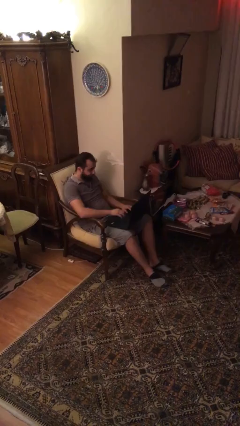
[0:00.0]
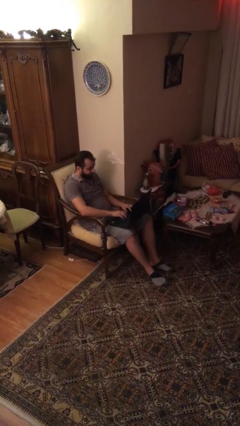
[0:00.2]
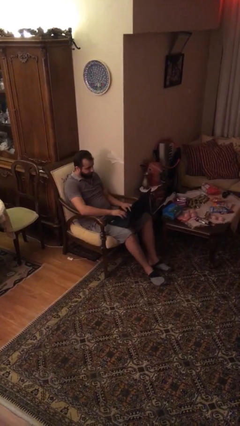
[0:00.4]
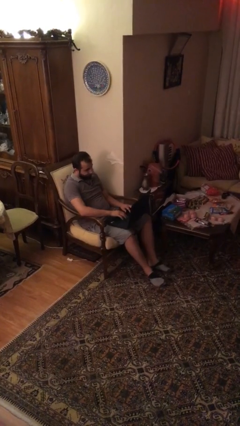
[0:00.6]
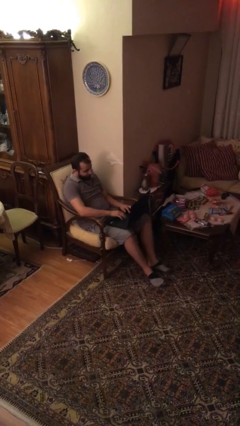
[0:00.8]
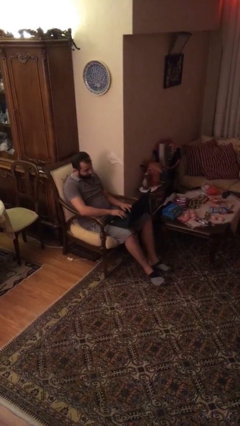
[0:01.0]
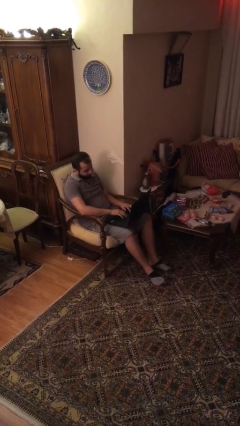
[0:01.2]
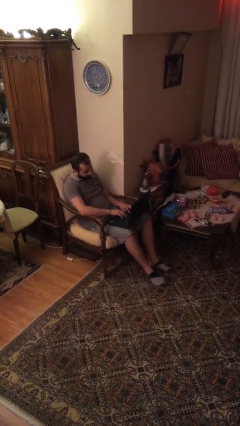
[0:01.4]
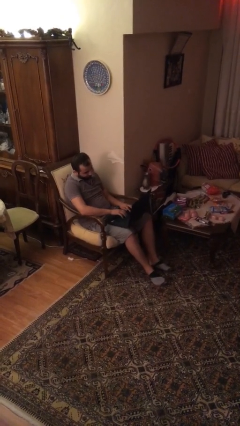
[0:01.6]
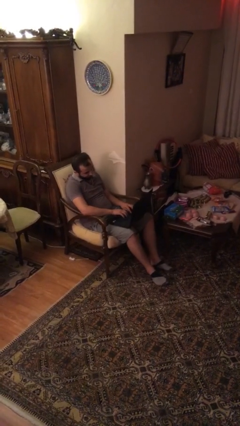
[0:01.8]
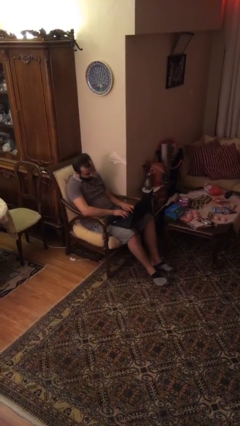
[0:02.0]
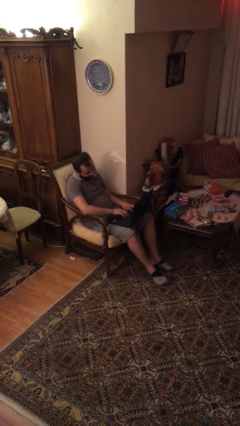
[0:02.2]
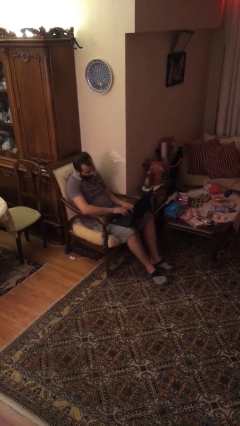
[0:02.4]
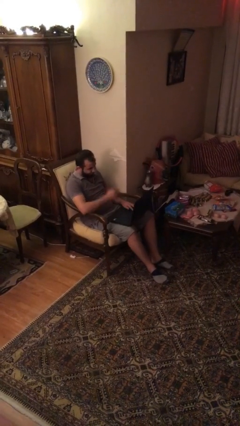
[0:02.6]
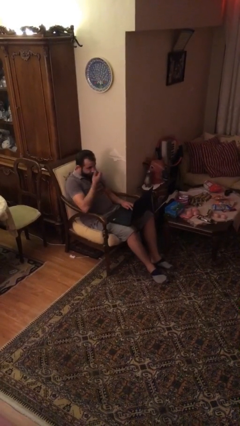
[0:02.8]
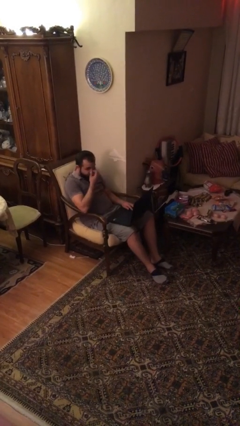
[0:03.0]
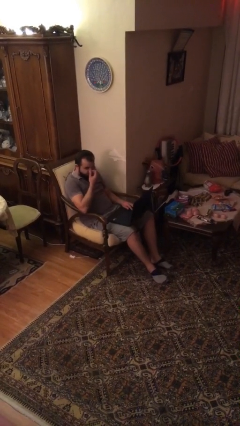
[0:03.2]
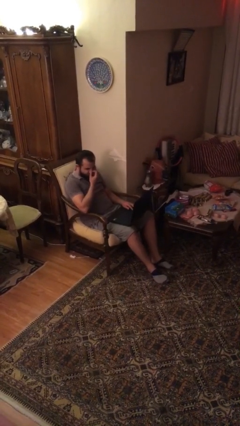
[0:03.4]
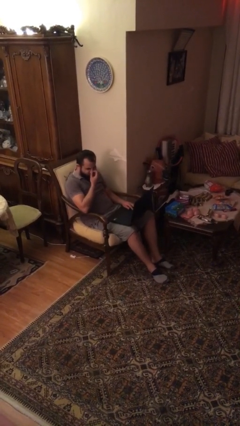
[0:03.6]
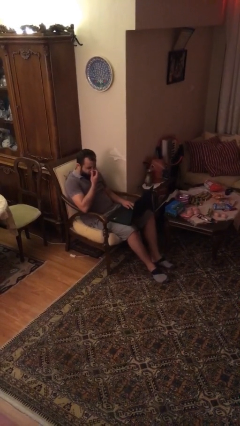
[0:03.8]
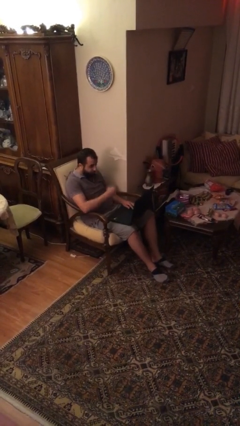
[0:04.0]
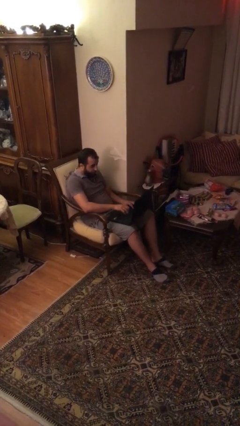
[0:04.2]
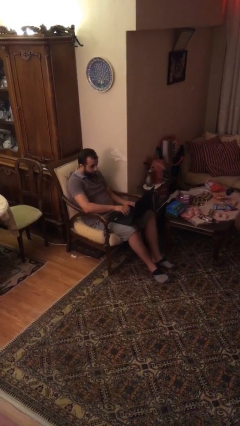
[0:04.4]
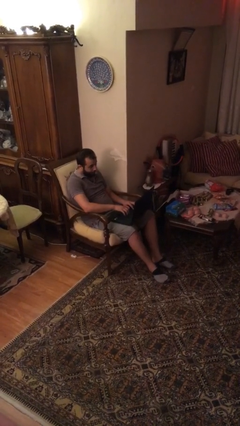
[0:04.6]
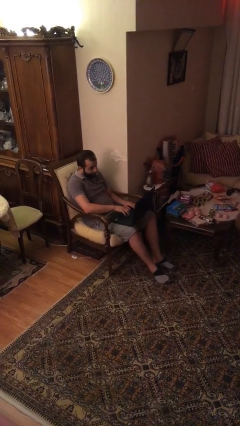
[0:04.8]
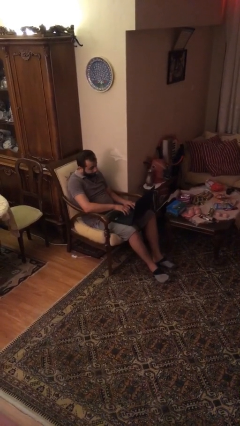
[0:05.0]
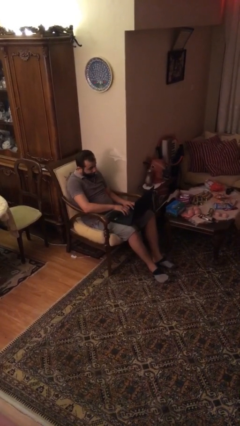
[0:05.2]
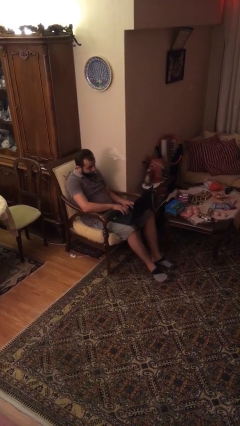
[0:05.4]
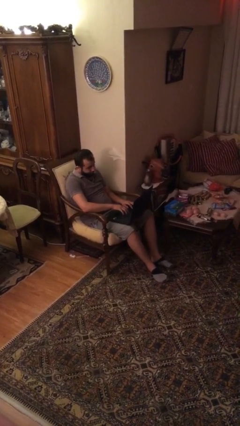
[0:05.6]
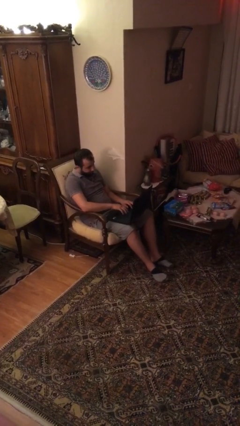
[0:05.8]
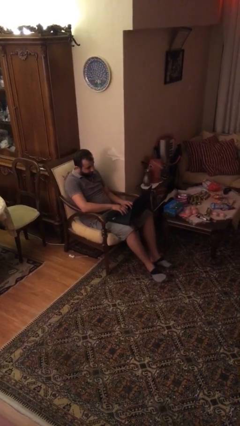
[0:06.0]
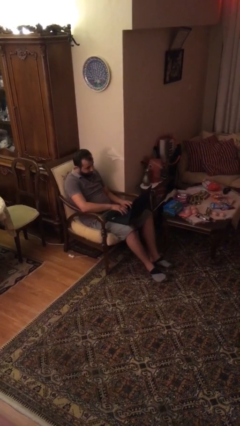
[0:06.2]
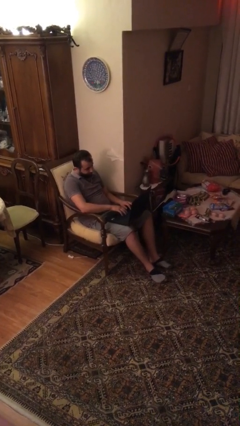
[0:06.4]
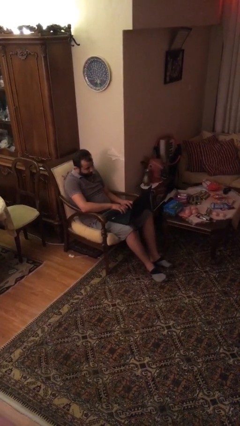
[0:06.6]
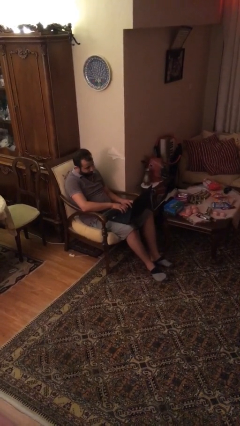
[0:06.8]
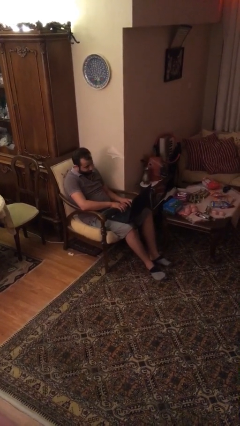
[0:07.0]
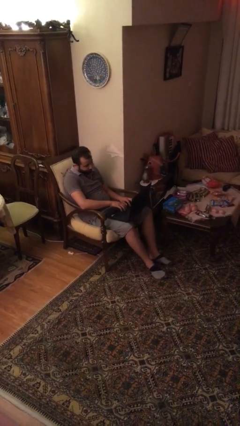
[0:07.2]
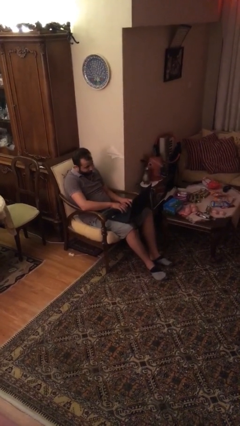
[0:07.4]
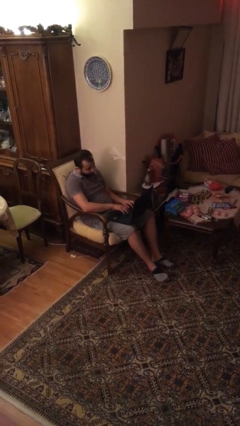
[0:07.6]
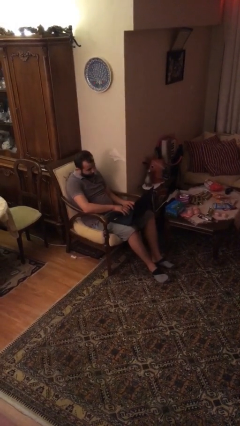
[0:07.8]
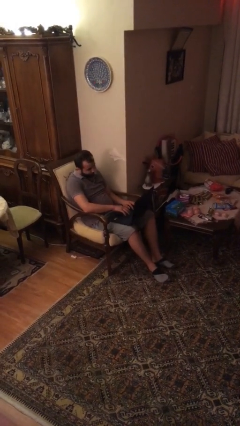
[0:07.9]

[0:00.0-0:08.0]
person interacts with laptop

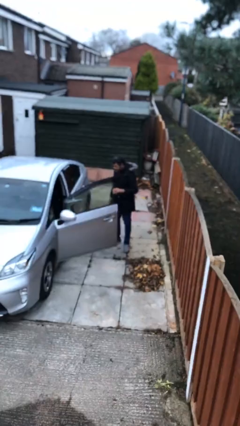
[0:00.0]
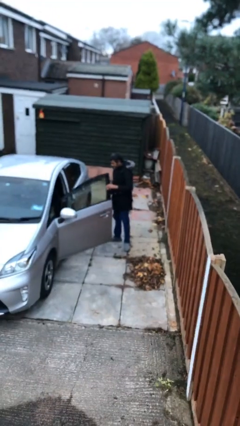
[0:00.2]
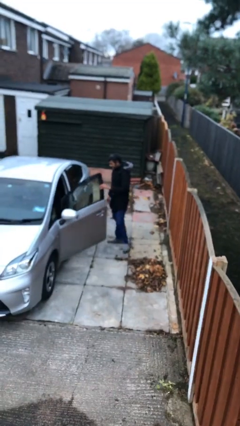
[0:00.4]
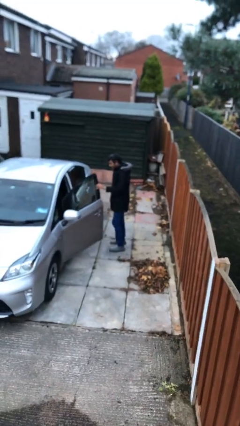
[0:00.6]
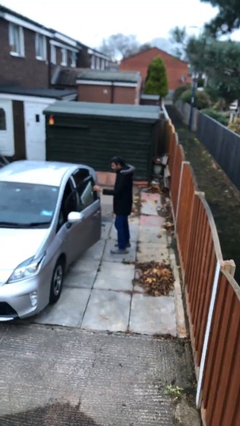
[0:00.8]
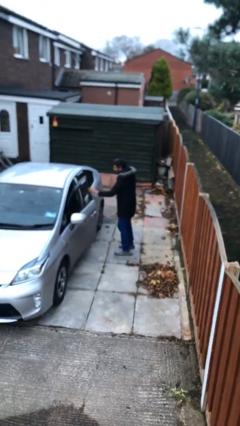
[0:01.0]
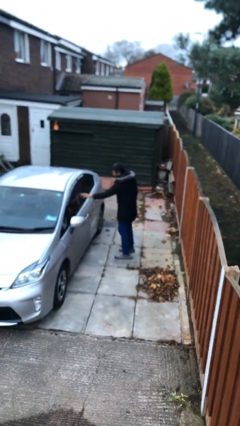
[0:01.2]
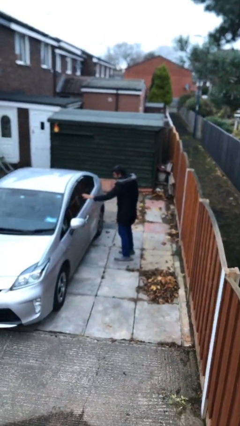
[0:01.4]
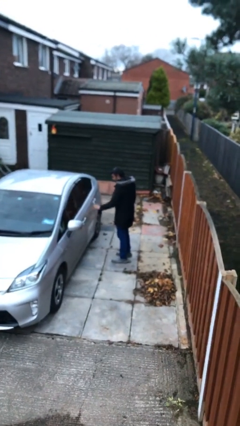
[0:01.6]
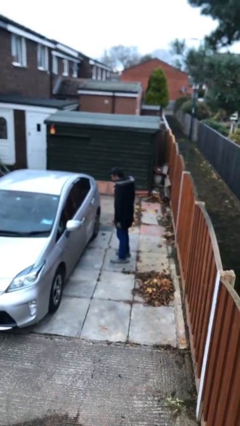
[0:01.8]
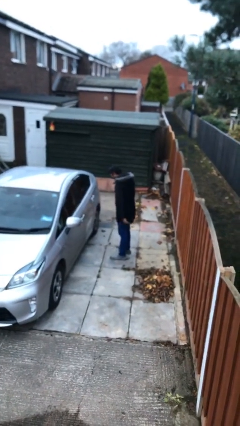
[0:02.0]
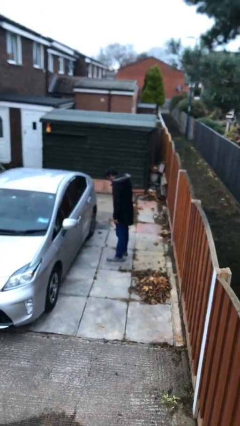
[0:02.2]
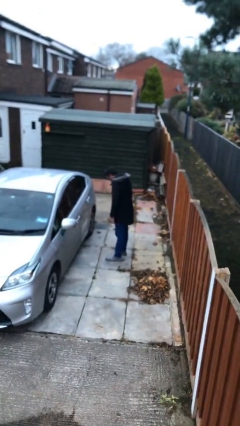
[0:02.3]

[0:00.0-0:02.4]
person closes car door

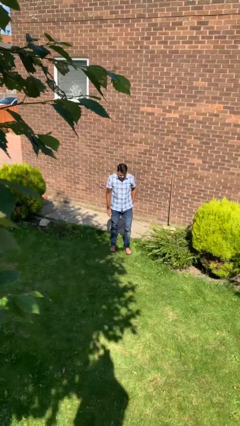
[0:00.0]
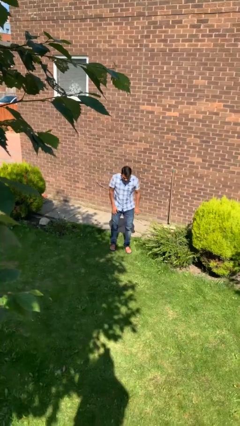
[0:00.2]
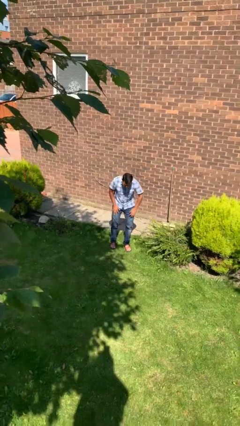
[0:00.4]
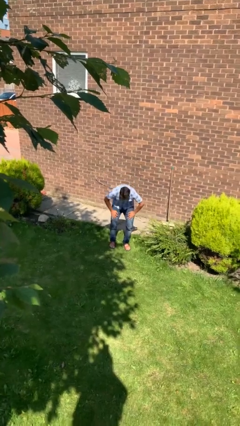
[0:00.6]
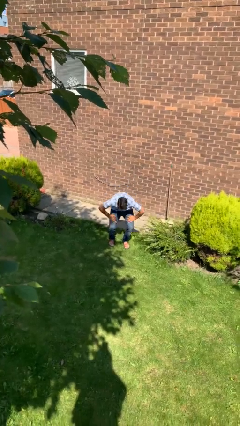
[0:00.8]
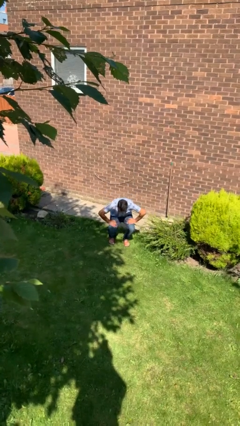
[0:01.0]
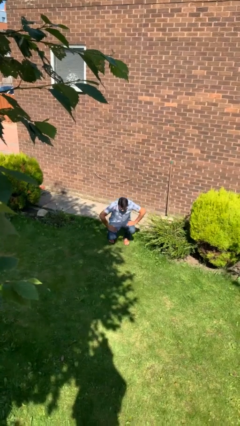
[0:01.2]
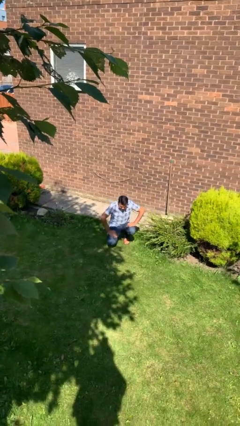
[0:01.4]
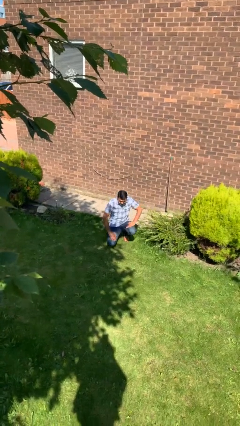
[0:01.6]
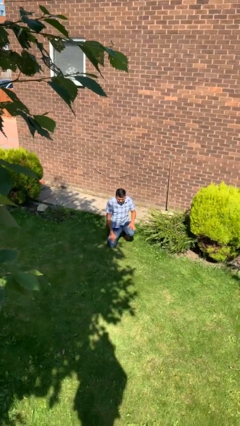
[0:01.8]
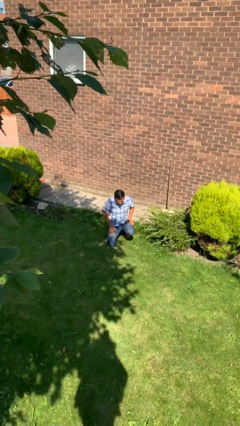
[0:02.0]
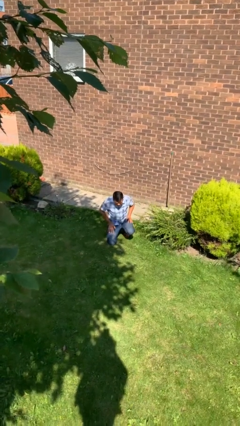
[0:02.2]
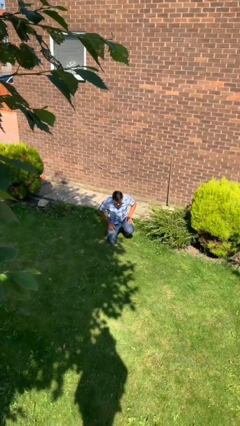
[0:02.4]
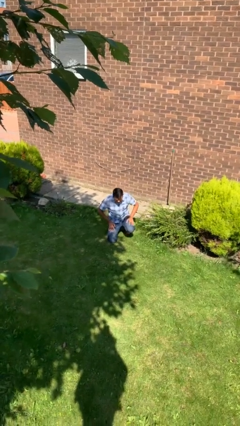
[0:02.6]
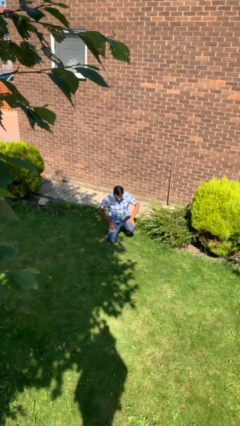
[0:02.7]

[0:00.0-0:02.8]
person kneels

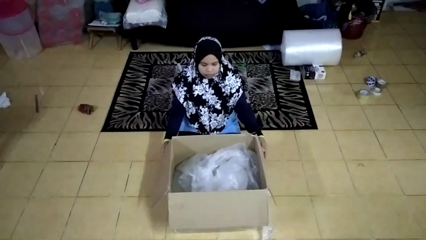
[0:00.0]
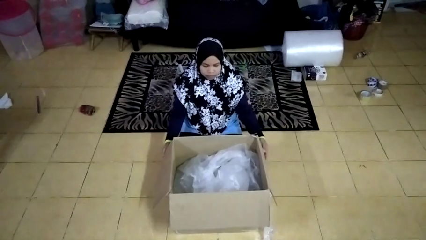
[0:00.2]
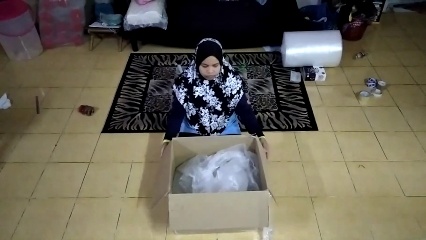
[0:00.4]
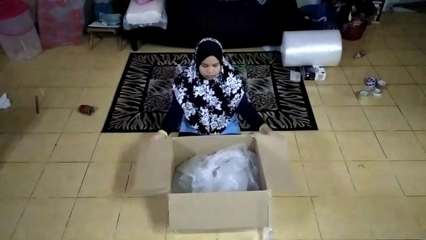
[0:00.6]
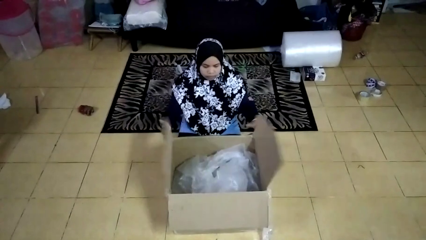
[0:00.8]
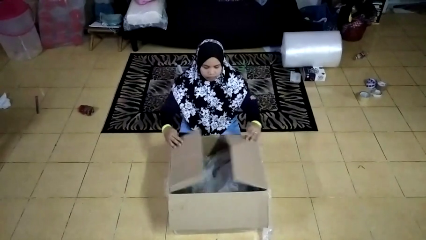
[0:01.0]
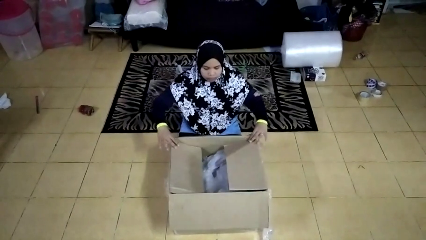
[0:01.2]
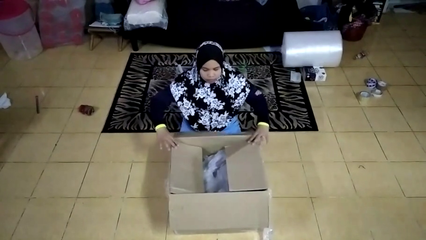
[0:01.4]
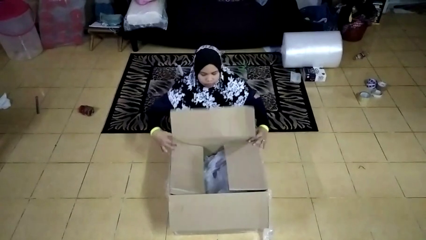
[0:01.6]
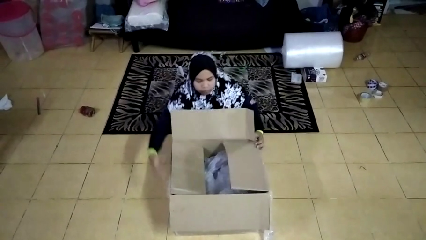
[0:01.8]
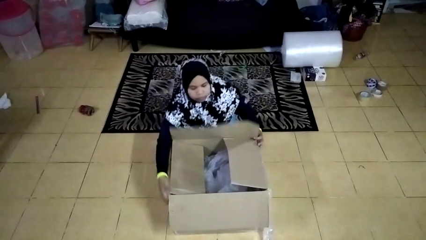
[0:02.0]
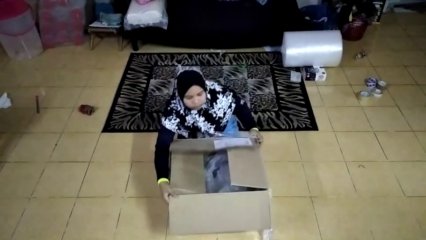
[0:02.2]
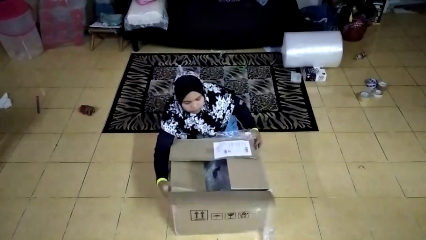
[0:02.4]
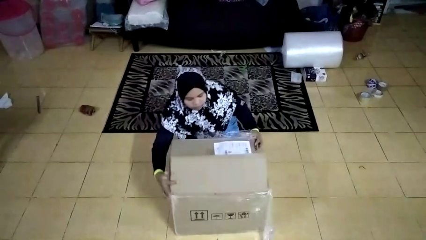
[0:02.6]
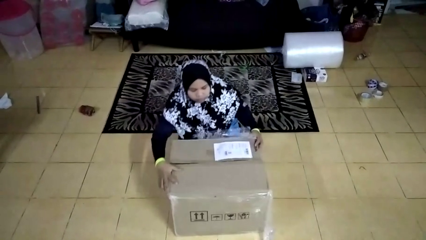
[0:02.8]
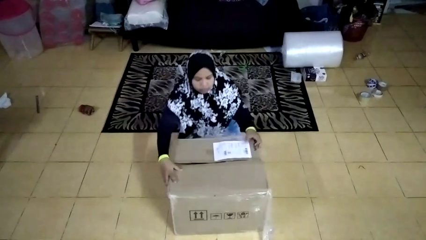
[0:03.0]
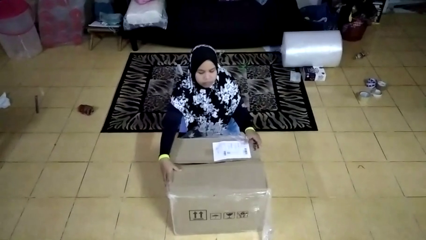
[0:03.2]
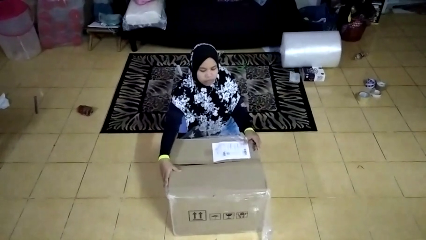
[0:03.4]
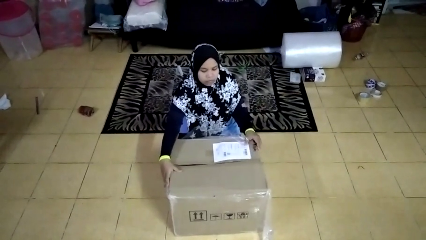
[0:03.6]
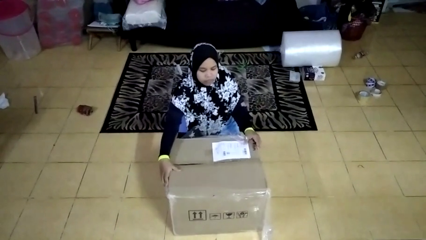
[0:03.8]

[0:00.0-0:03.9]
person closes box

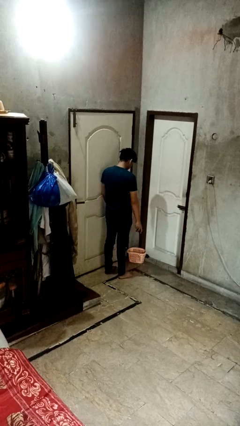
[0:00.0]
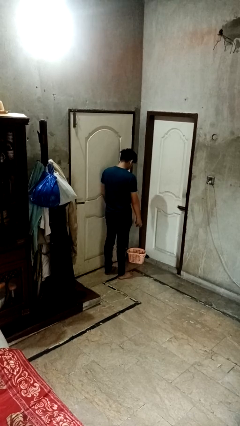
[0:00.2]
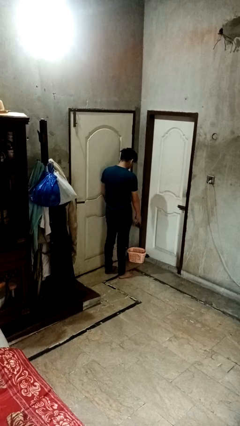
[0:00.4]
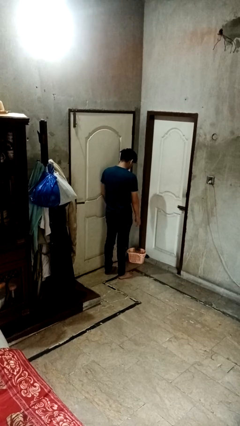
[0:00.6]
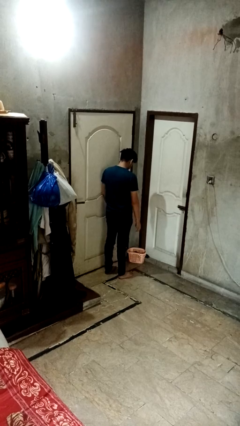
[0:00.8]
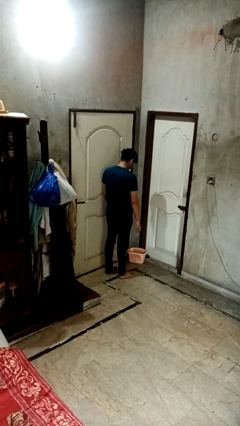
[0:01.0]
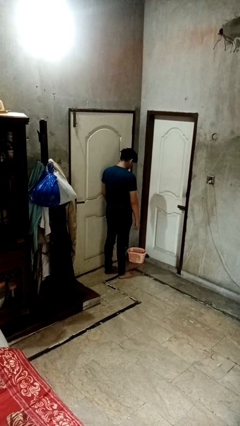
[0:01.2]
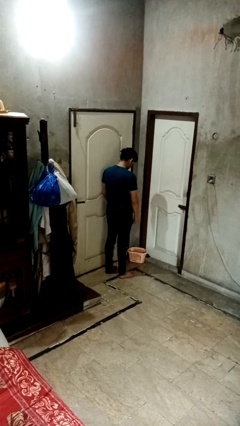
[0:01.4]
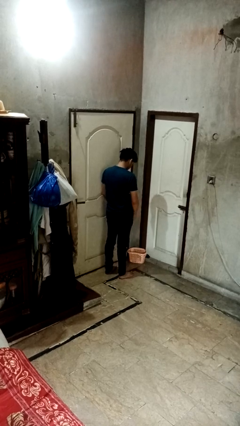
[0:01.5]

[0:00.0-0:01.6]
person discards trash
